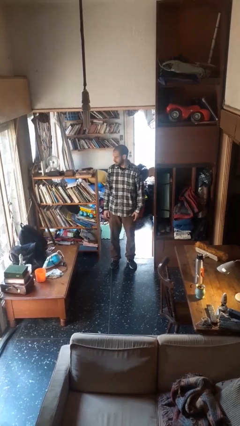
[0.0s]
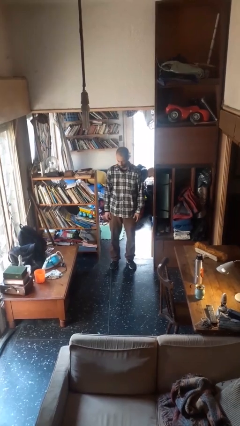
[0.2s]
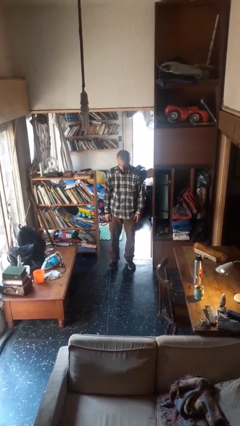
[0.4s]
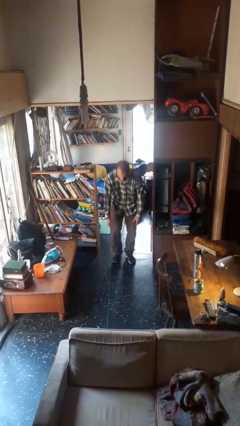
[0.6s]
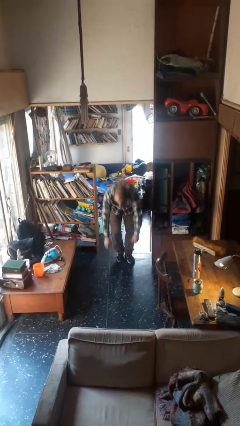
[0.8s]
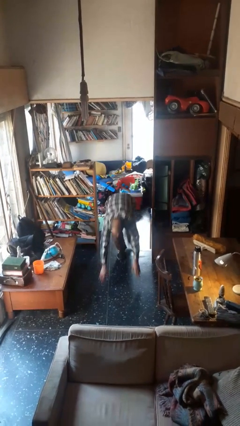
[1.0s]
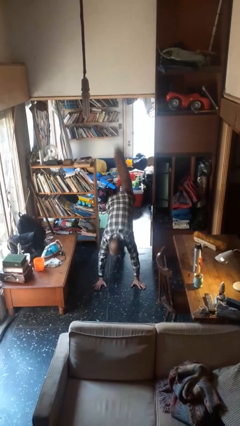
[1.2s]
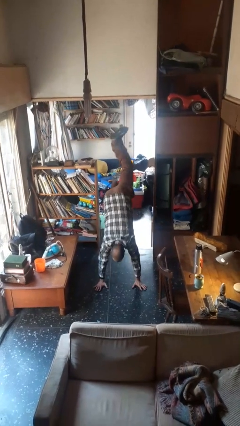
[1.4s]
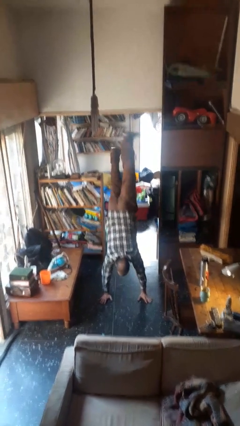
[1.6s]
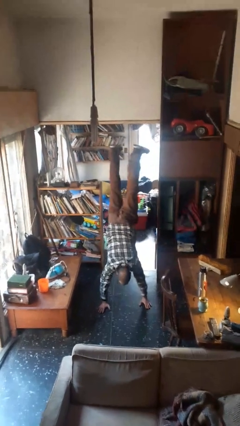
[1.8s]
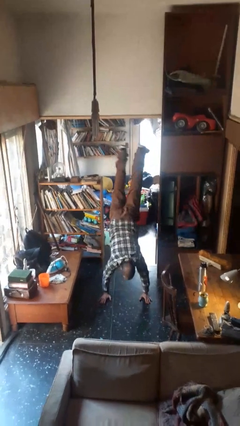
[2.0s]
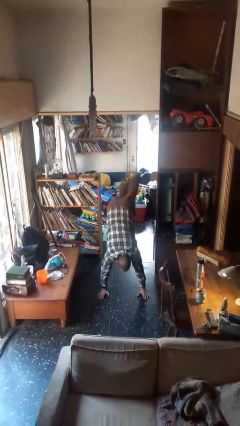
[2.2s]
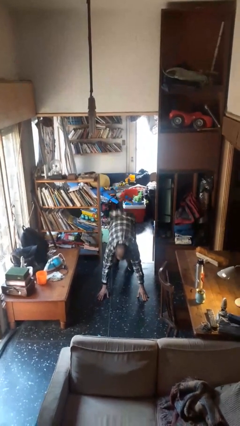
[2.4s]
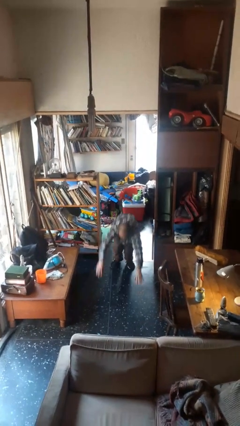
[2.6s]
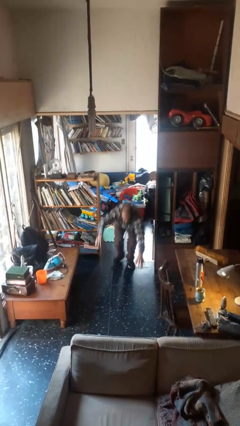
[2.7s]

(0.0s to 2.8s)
person handstand

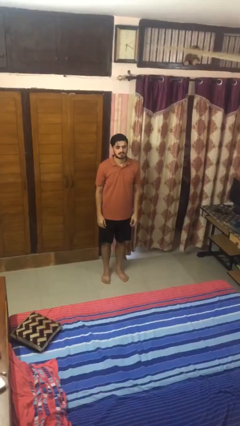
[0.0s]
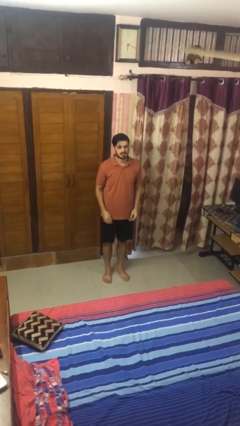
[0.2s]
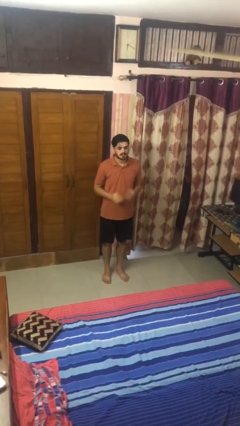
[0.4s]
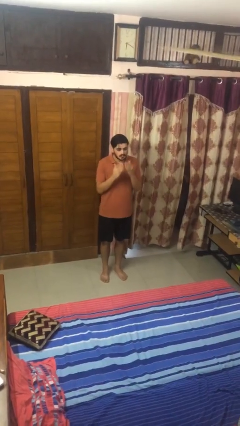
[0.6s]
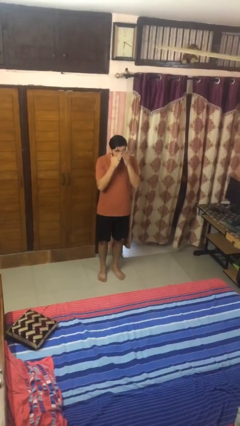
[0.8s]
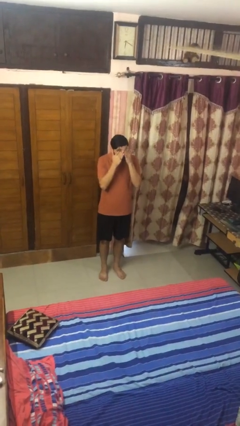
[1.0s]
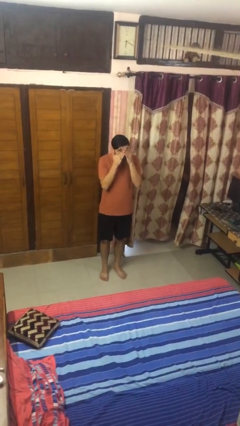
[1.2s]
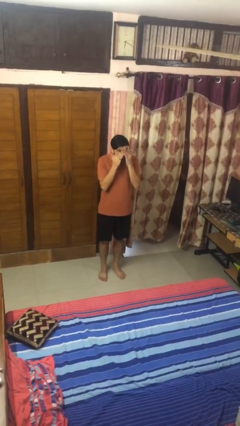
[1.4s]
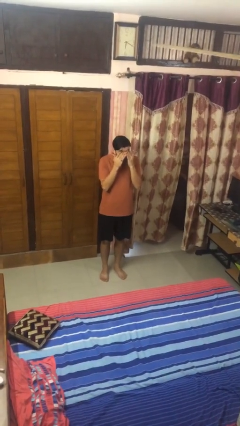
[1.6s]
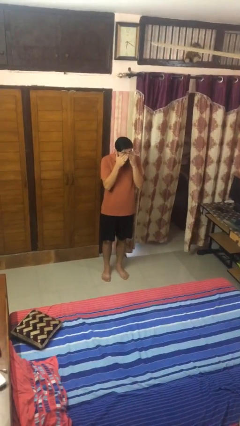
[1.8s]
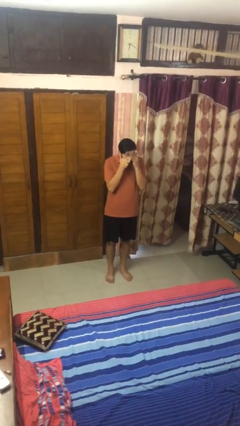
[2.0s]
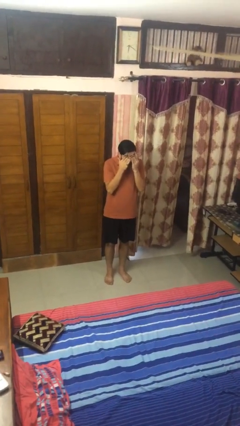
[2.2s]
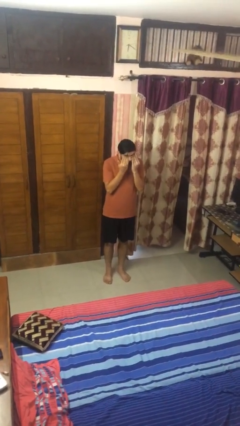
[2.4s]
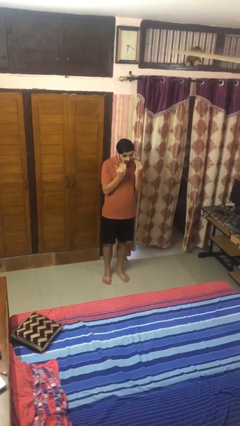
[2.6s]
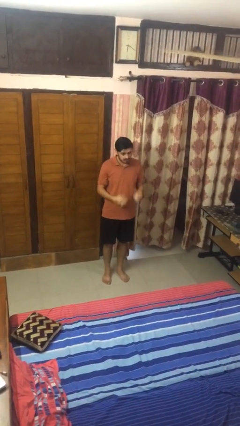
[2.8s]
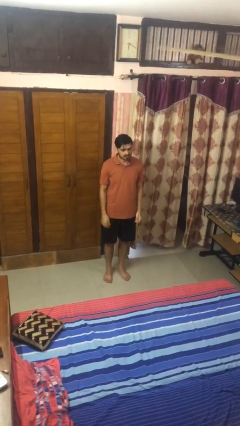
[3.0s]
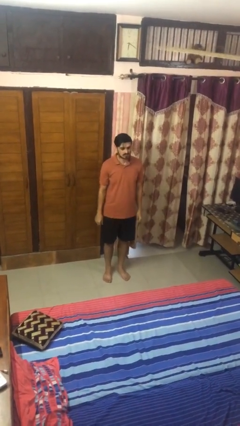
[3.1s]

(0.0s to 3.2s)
person rubs eyes

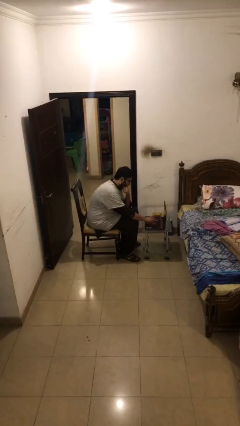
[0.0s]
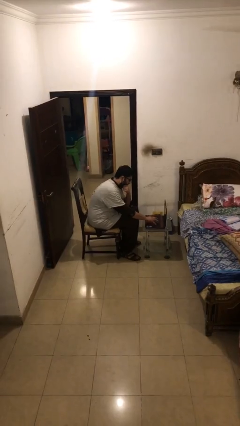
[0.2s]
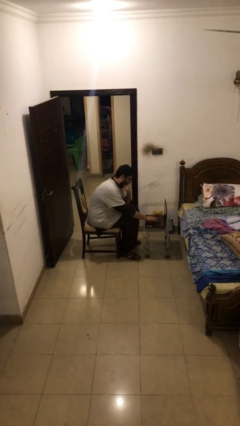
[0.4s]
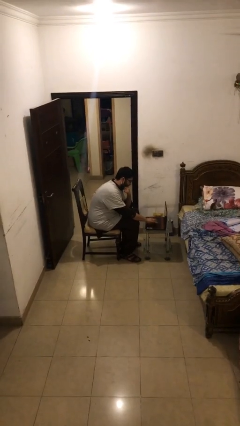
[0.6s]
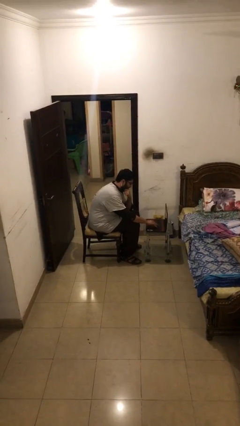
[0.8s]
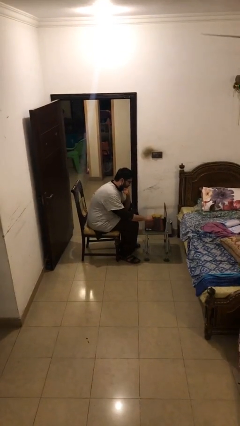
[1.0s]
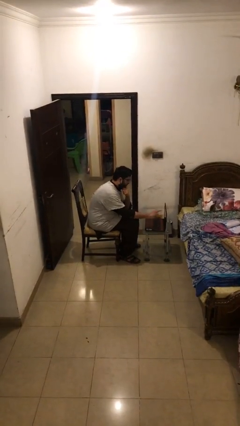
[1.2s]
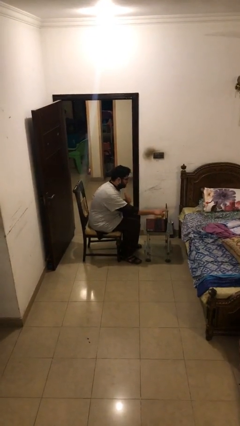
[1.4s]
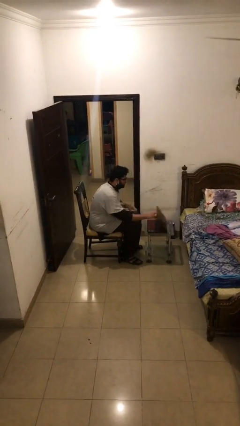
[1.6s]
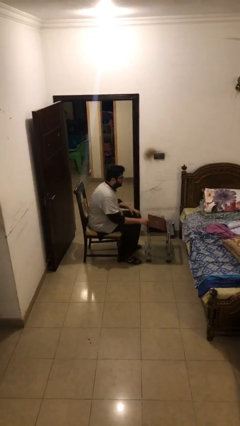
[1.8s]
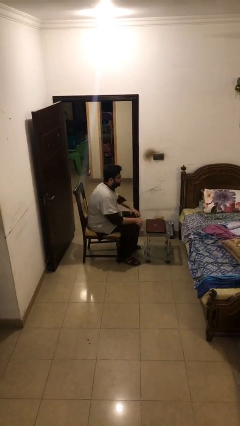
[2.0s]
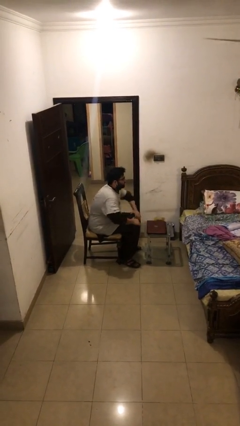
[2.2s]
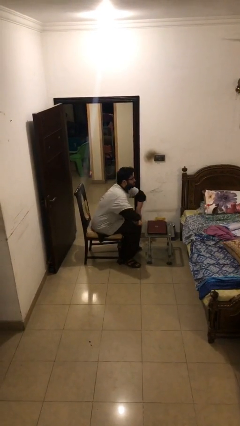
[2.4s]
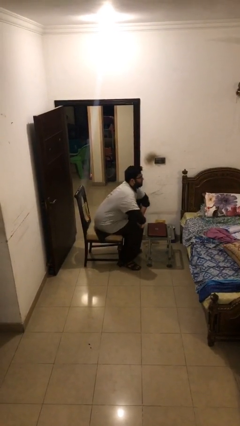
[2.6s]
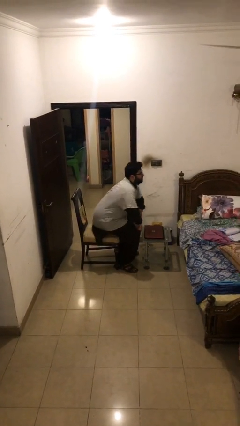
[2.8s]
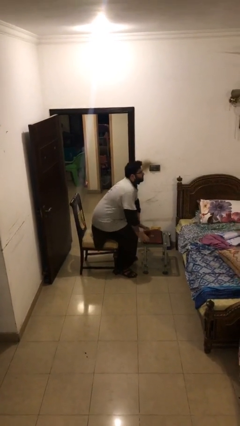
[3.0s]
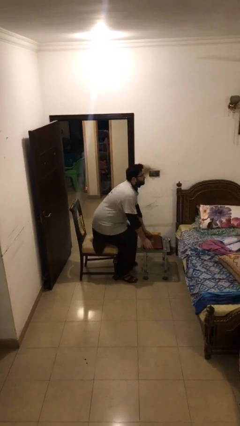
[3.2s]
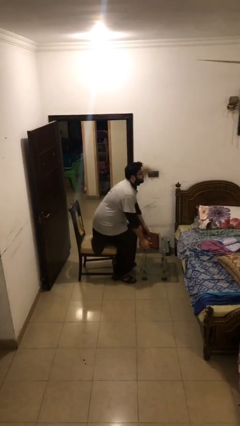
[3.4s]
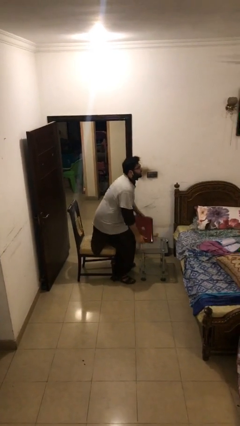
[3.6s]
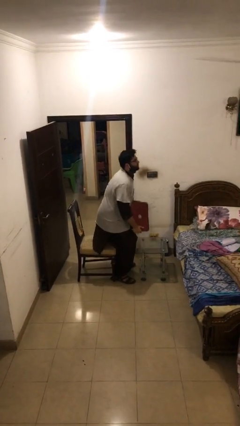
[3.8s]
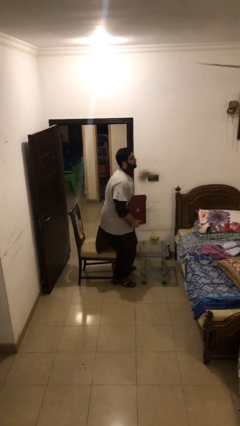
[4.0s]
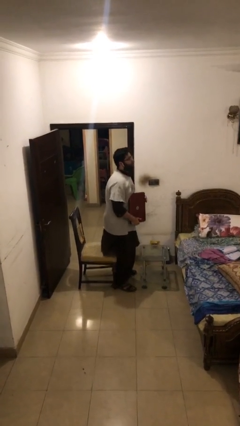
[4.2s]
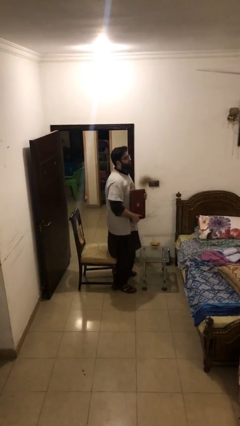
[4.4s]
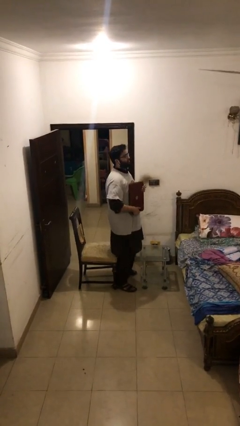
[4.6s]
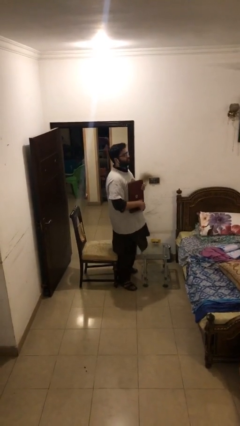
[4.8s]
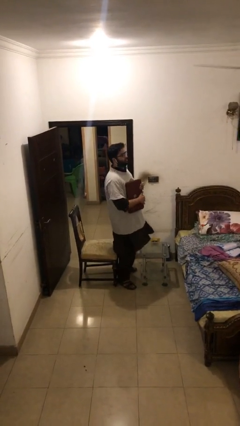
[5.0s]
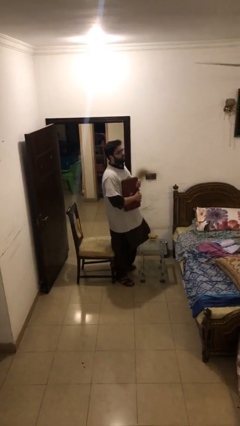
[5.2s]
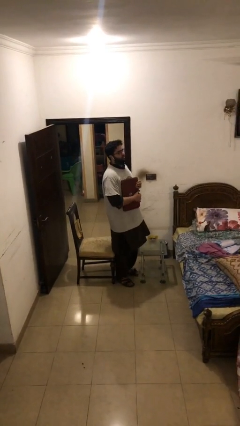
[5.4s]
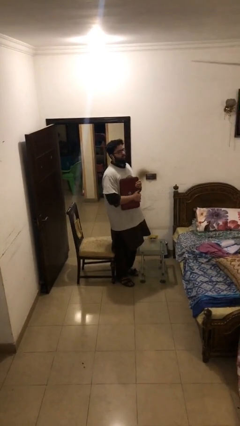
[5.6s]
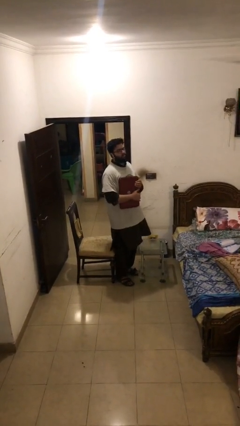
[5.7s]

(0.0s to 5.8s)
person stands up

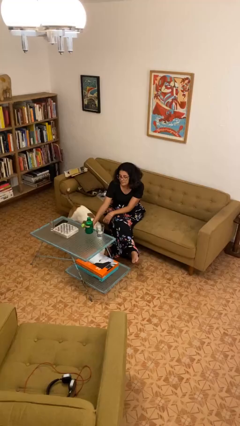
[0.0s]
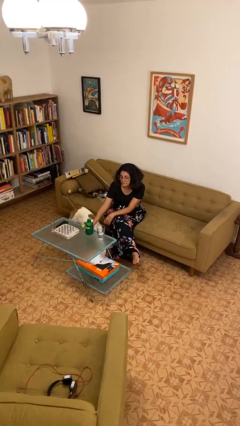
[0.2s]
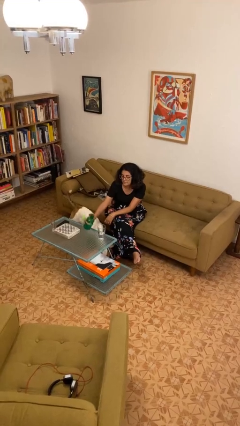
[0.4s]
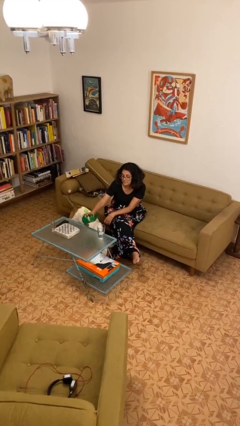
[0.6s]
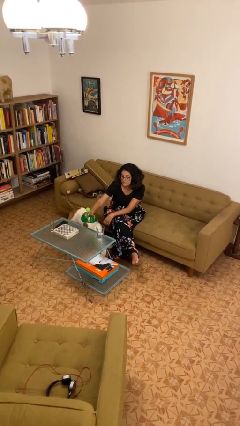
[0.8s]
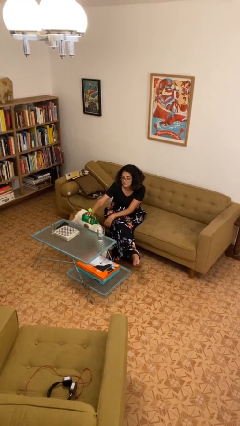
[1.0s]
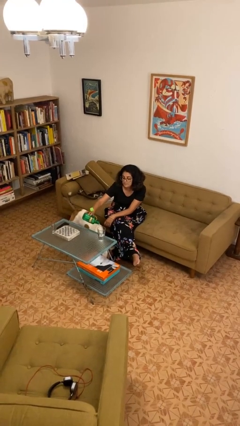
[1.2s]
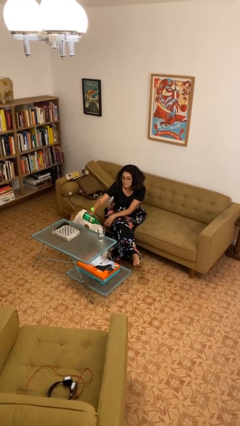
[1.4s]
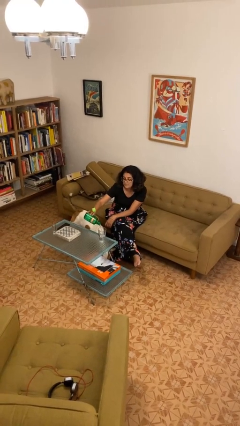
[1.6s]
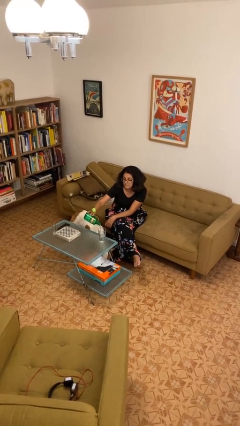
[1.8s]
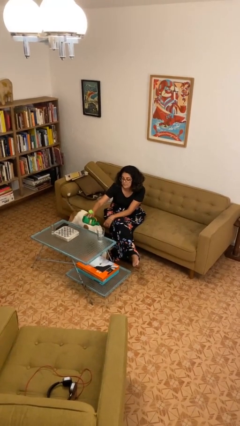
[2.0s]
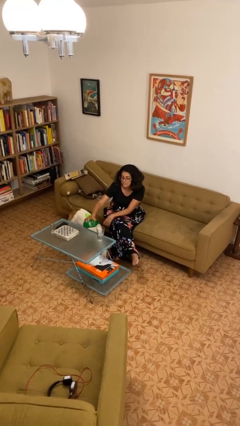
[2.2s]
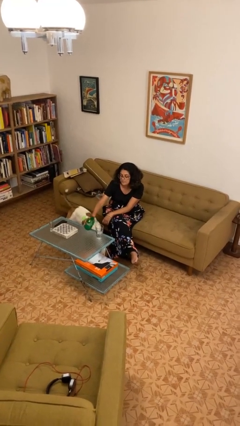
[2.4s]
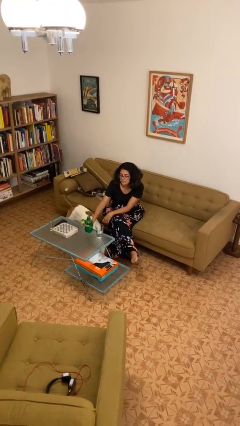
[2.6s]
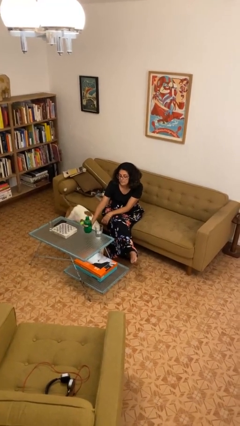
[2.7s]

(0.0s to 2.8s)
person pours liquid into cup

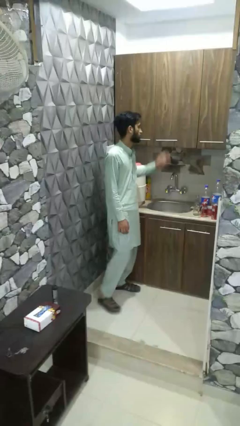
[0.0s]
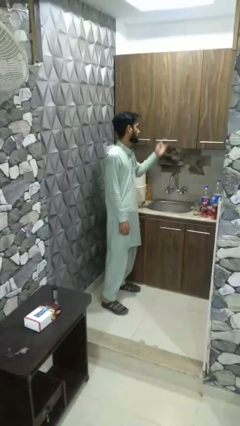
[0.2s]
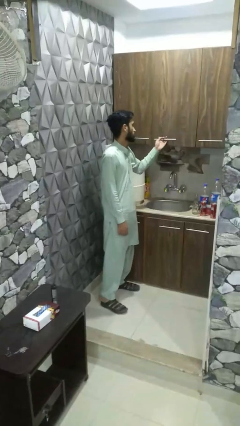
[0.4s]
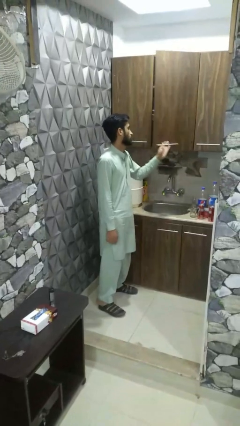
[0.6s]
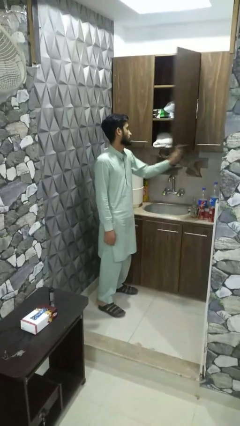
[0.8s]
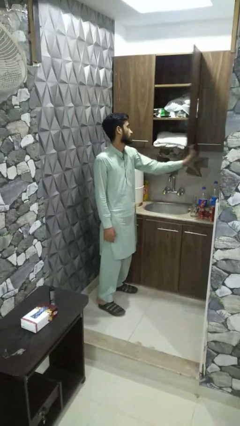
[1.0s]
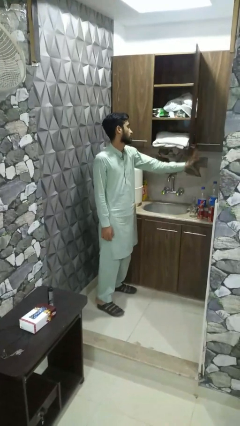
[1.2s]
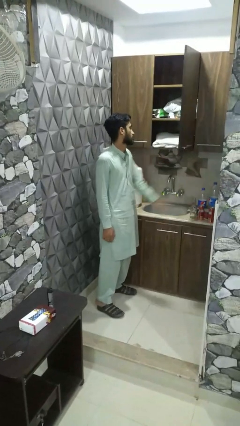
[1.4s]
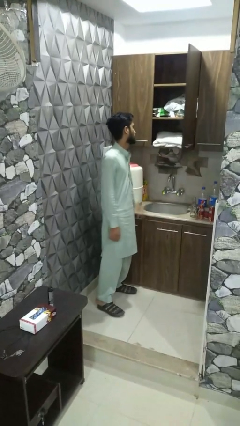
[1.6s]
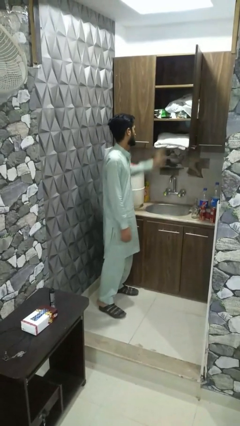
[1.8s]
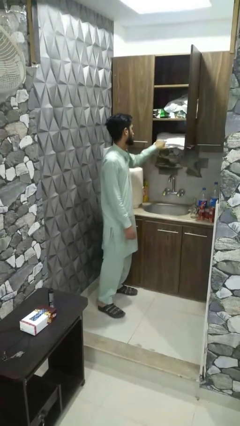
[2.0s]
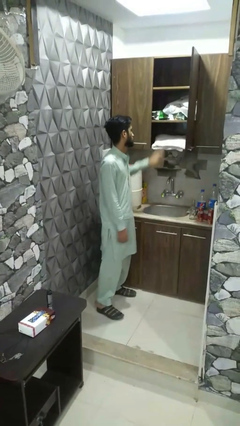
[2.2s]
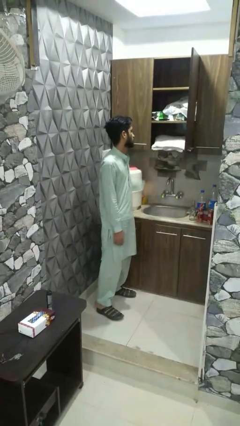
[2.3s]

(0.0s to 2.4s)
person opens dresser drawer

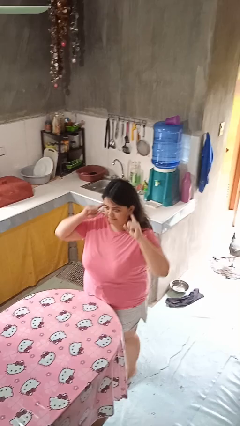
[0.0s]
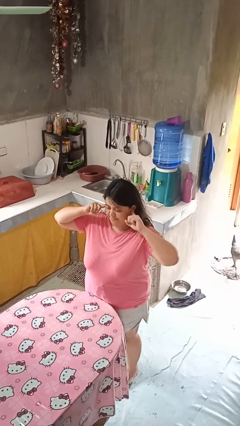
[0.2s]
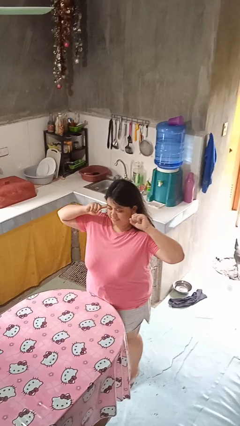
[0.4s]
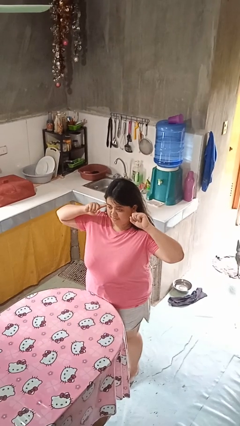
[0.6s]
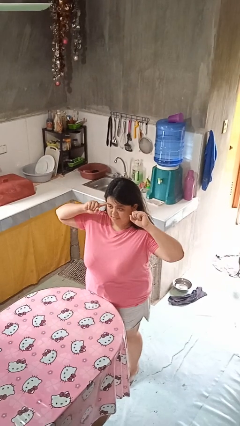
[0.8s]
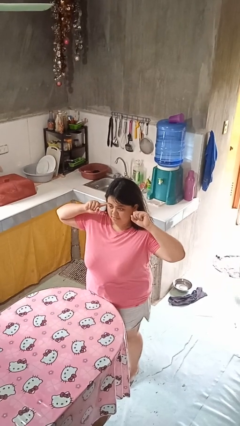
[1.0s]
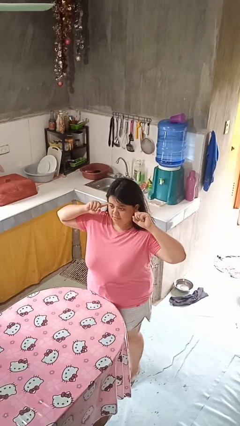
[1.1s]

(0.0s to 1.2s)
person puts fingers in ear
